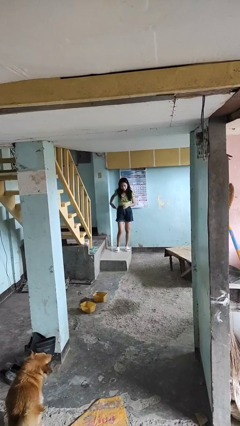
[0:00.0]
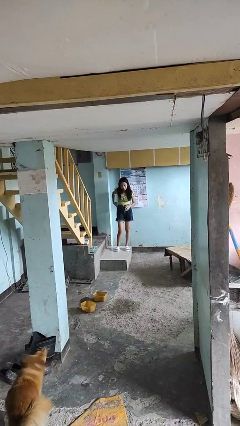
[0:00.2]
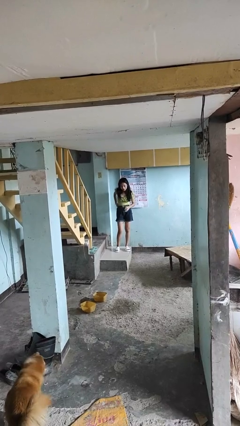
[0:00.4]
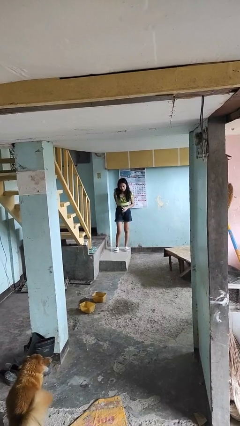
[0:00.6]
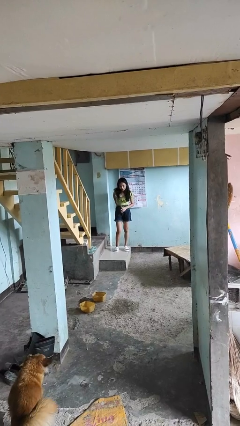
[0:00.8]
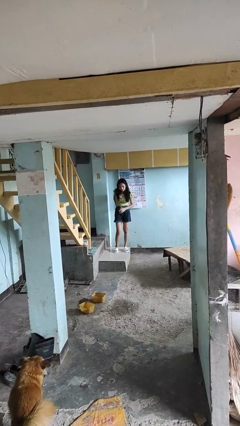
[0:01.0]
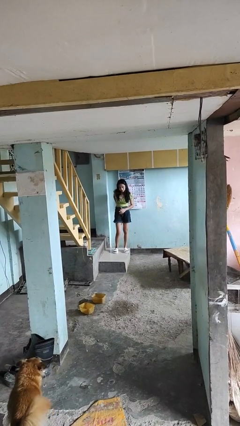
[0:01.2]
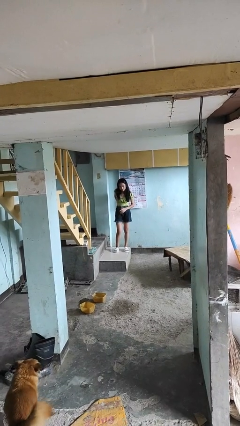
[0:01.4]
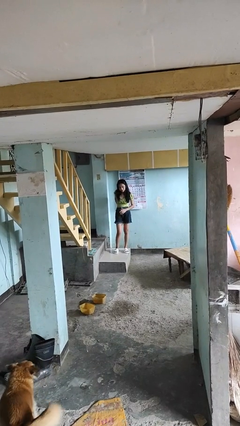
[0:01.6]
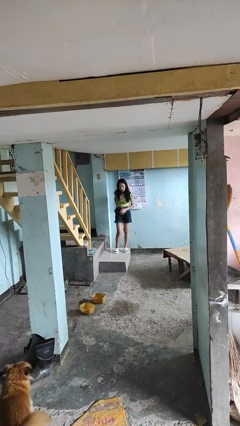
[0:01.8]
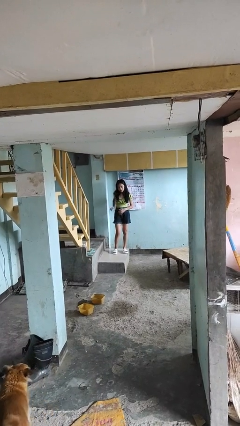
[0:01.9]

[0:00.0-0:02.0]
person puts phone into pocket

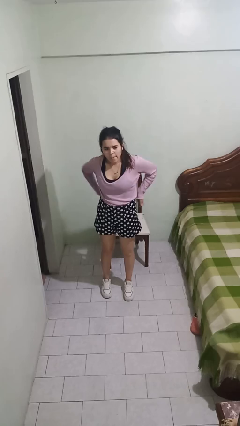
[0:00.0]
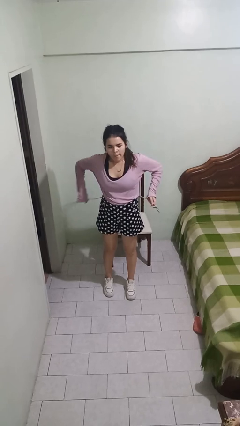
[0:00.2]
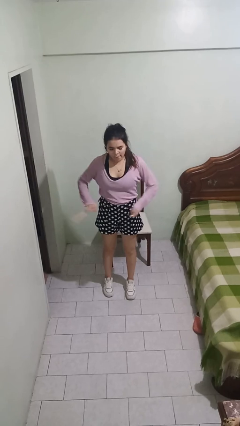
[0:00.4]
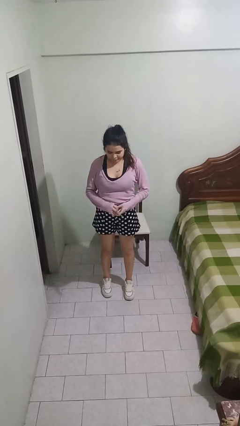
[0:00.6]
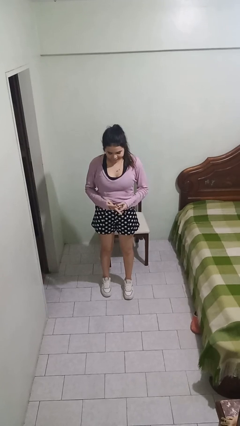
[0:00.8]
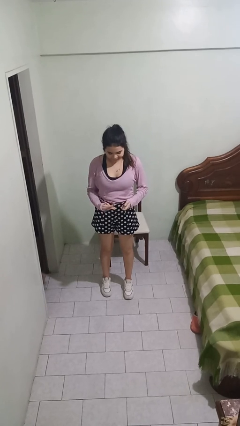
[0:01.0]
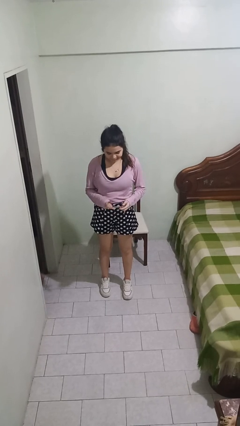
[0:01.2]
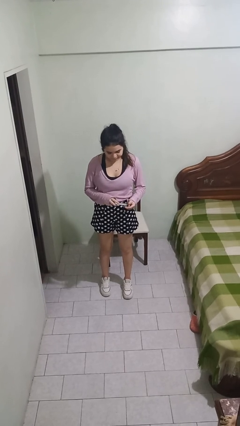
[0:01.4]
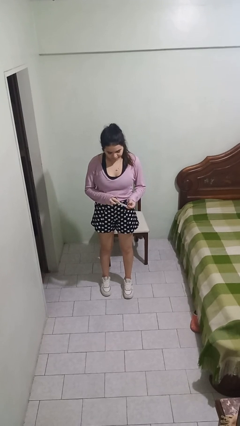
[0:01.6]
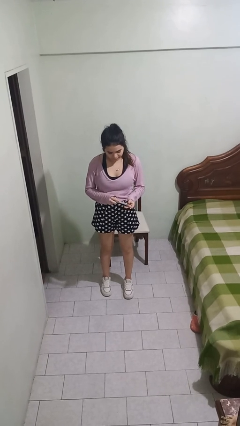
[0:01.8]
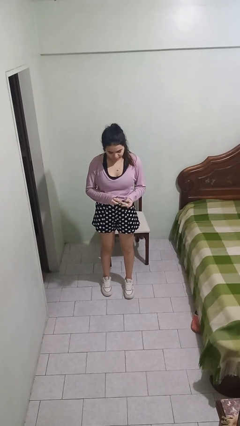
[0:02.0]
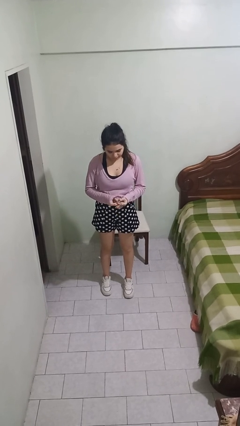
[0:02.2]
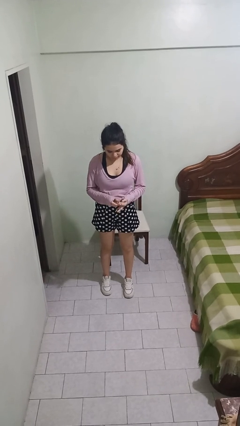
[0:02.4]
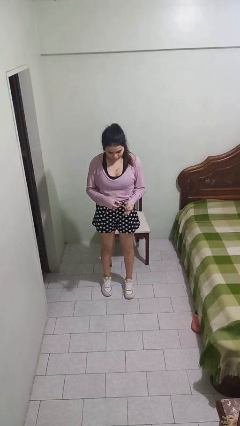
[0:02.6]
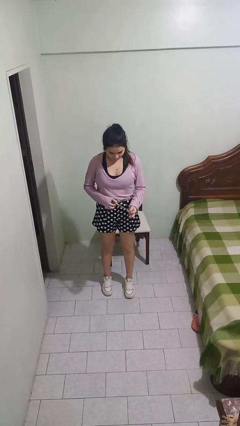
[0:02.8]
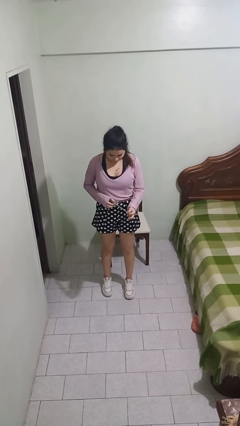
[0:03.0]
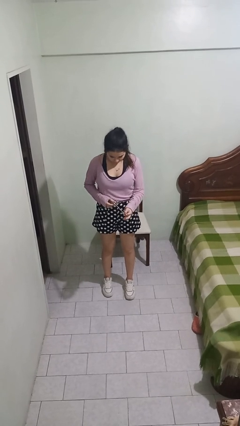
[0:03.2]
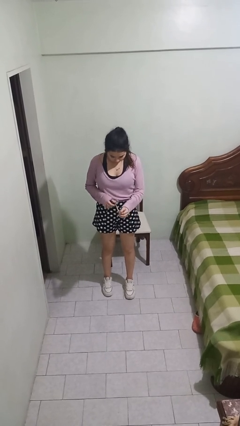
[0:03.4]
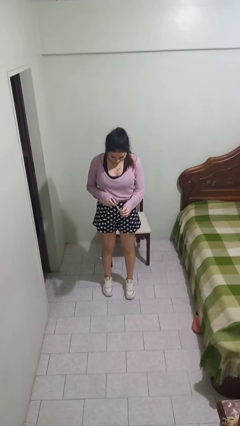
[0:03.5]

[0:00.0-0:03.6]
person puts on belt

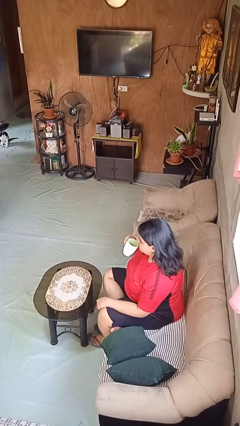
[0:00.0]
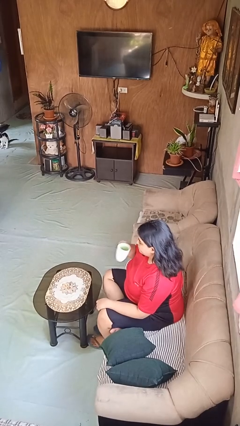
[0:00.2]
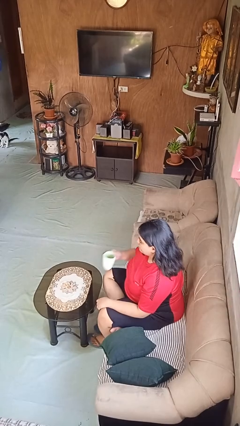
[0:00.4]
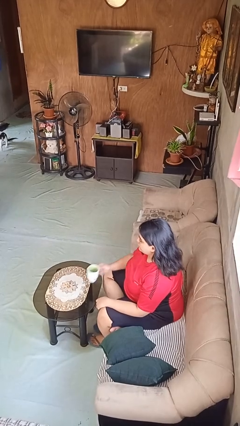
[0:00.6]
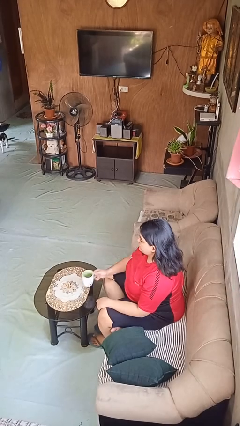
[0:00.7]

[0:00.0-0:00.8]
person puts down object on table

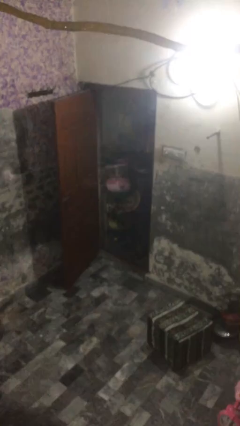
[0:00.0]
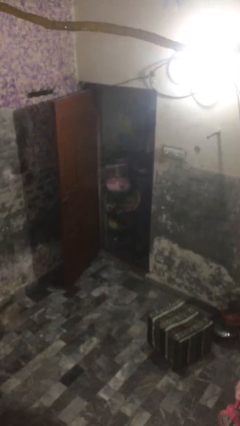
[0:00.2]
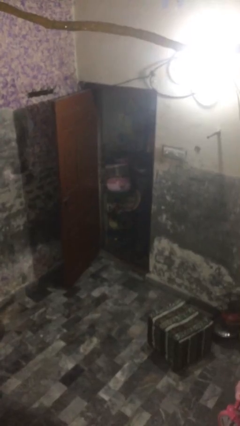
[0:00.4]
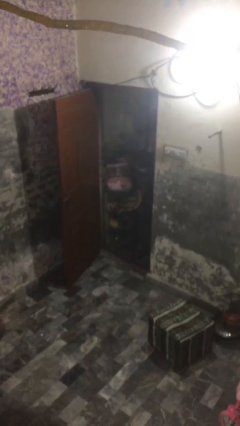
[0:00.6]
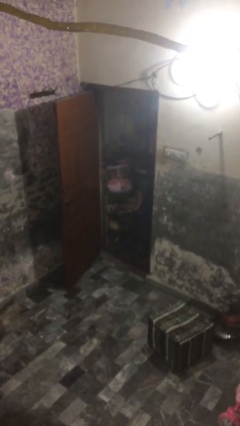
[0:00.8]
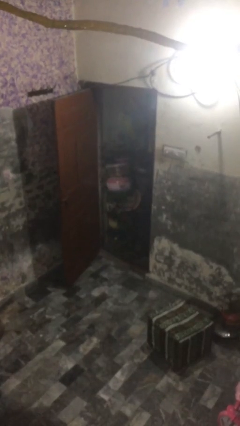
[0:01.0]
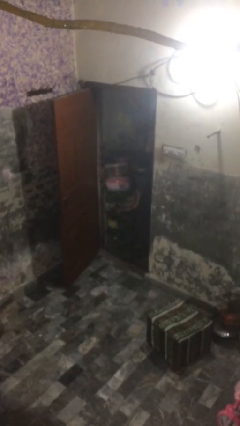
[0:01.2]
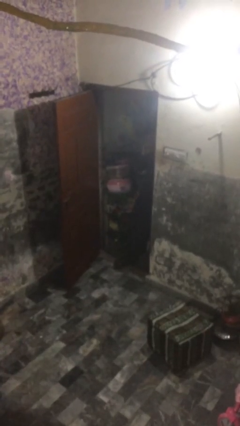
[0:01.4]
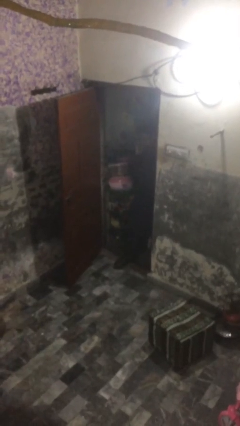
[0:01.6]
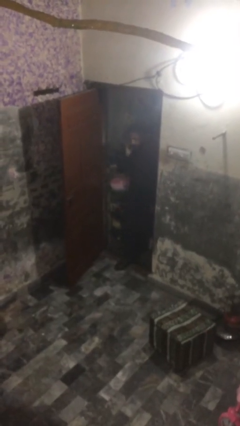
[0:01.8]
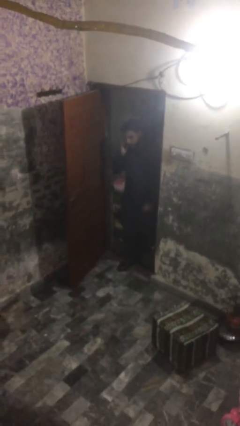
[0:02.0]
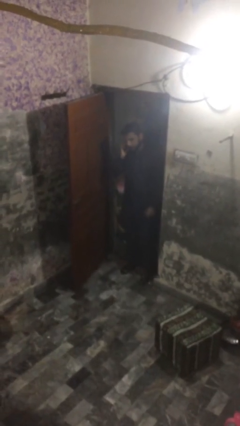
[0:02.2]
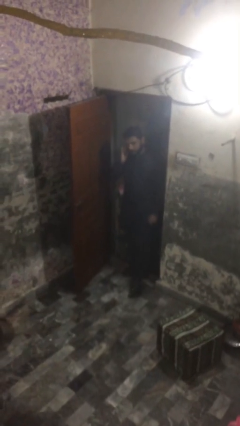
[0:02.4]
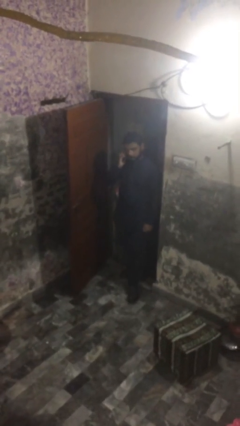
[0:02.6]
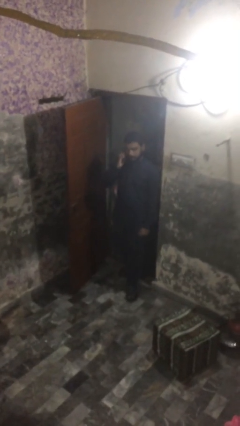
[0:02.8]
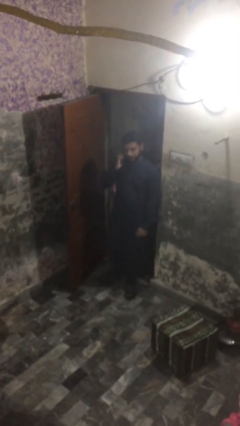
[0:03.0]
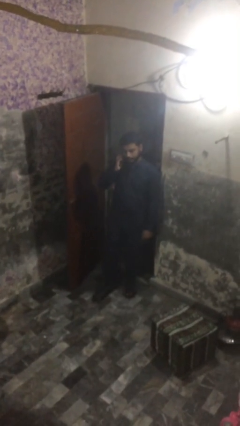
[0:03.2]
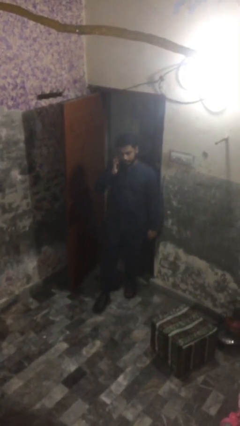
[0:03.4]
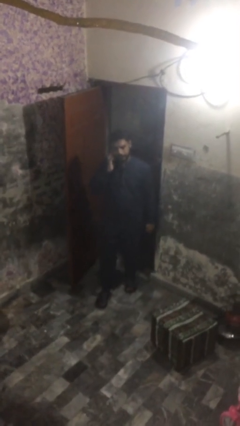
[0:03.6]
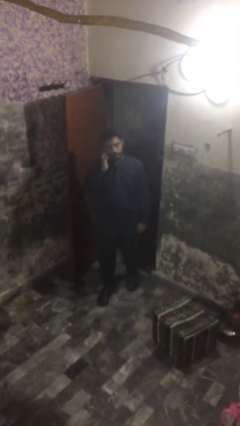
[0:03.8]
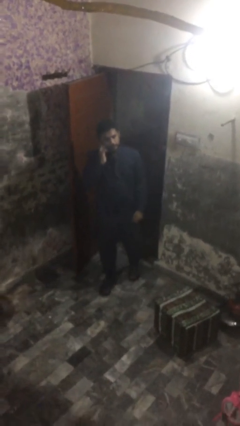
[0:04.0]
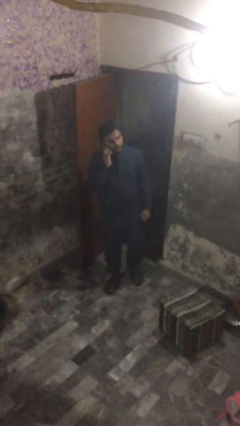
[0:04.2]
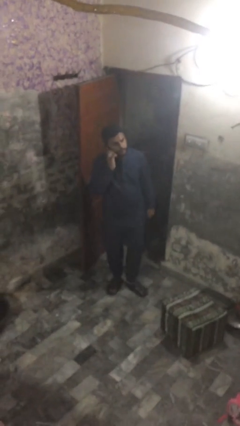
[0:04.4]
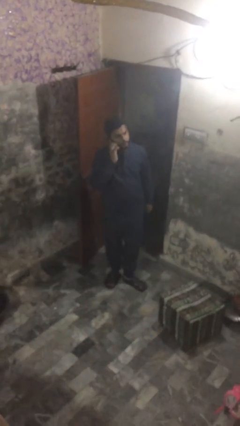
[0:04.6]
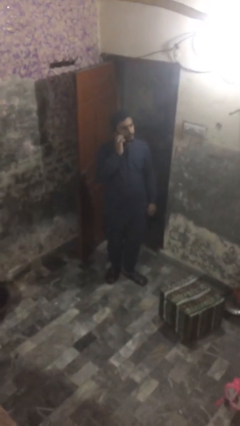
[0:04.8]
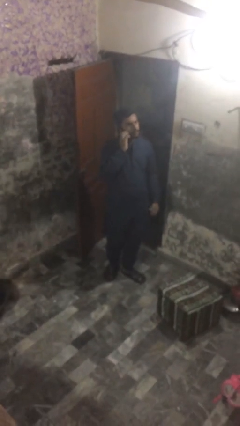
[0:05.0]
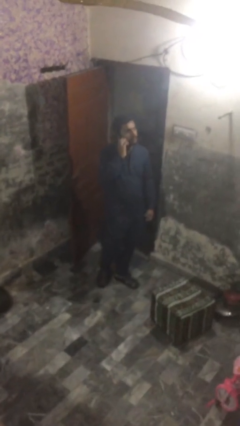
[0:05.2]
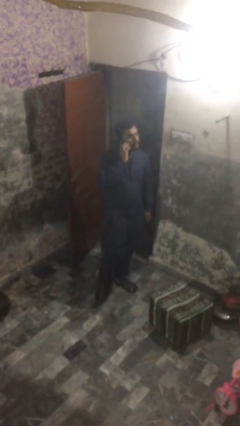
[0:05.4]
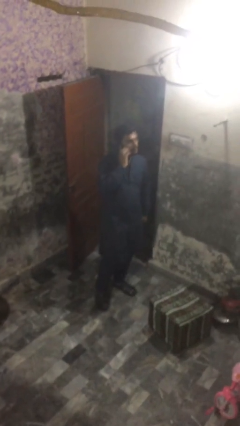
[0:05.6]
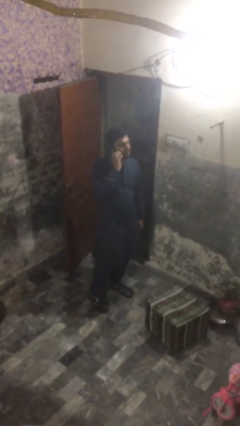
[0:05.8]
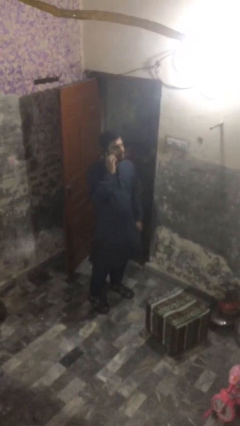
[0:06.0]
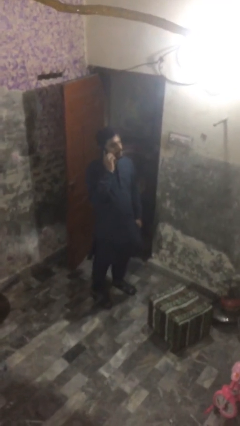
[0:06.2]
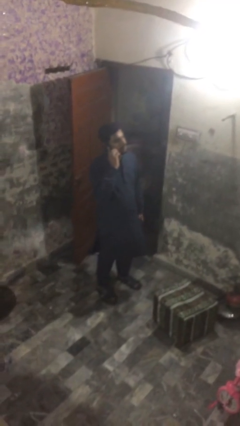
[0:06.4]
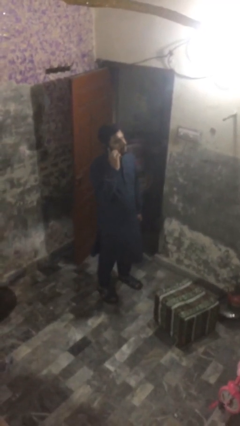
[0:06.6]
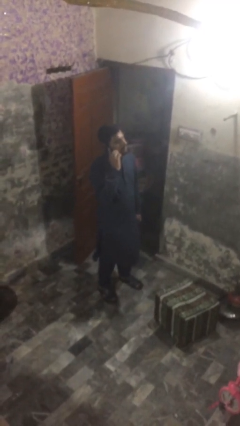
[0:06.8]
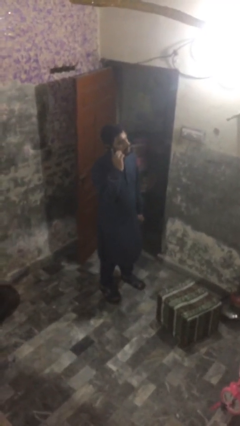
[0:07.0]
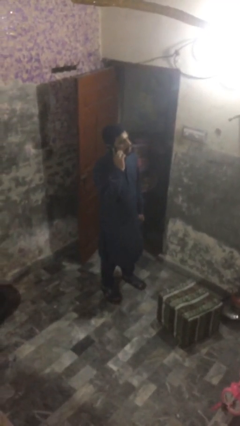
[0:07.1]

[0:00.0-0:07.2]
person enters scene through structure

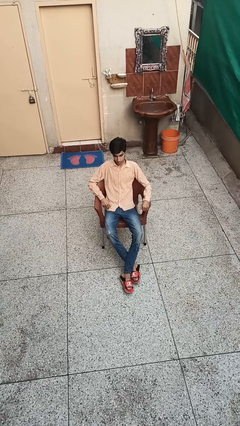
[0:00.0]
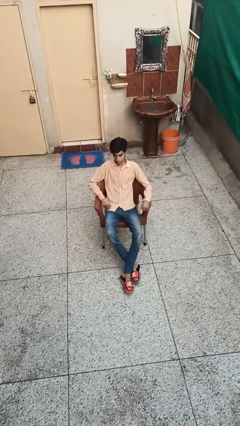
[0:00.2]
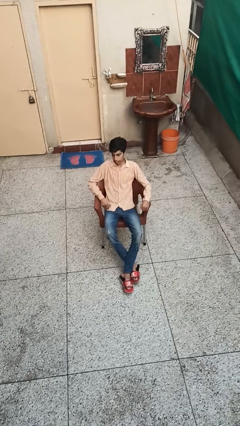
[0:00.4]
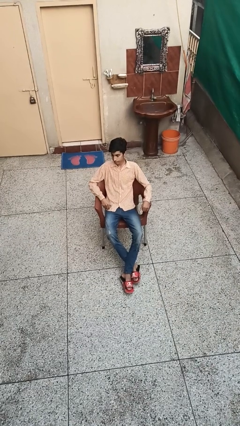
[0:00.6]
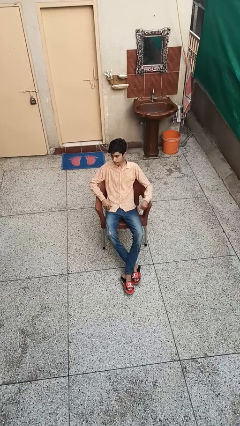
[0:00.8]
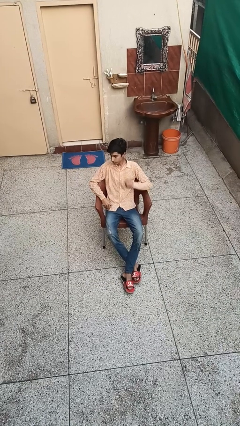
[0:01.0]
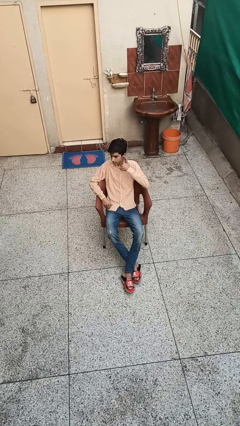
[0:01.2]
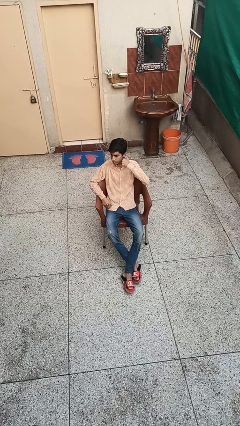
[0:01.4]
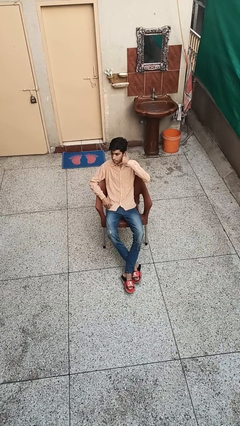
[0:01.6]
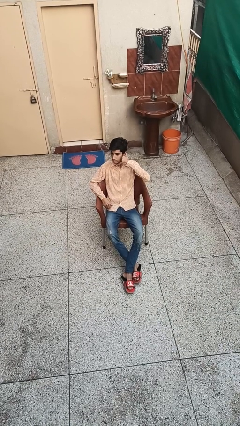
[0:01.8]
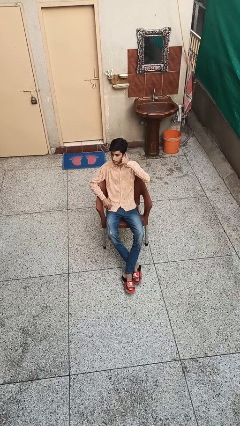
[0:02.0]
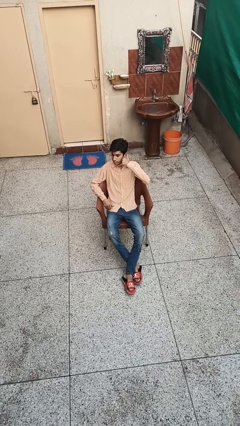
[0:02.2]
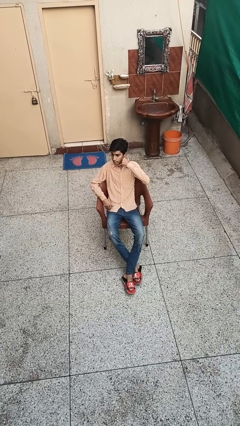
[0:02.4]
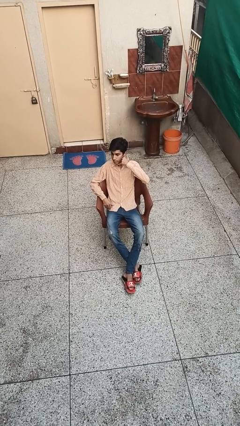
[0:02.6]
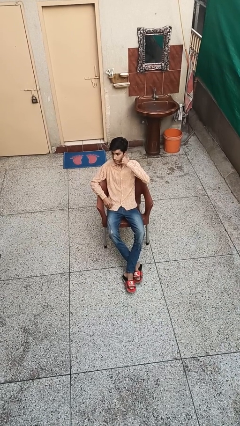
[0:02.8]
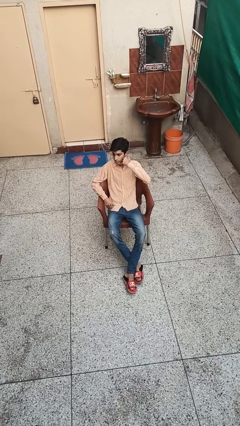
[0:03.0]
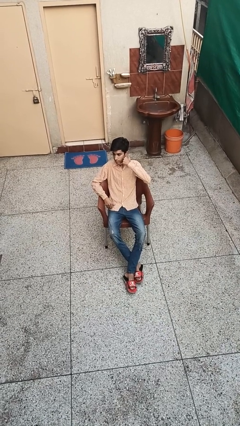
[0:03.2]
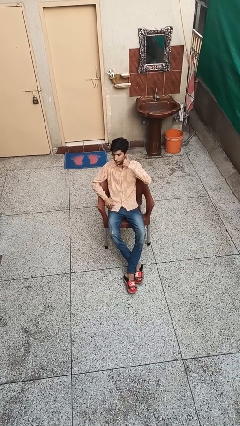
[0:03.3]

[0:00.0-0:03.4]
person gestures call me

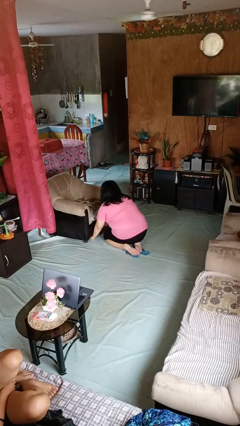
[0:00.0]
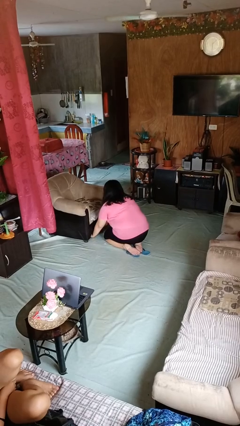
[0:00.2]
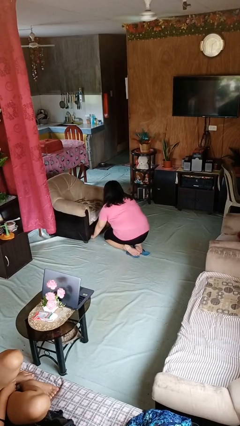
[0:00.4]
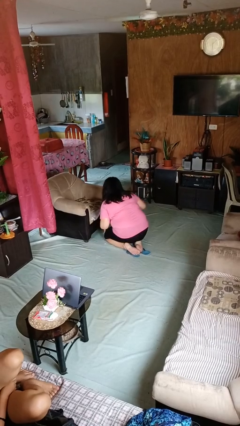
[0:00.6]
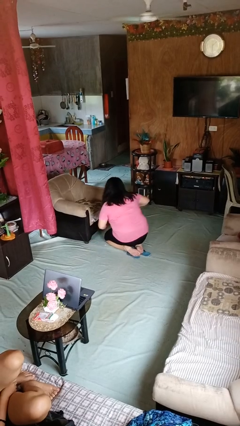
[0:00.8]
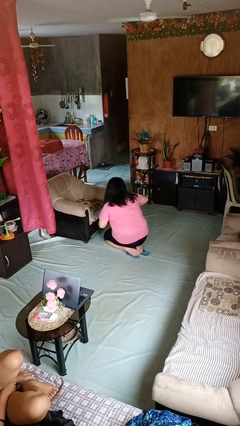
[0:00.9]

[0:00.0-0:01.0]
person searches under couch
